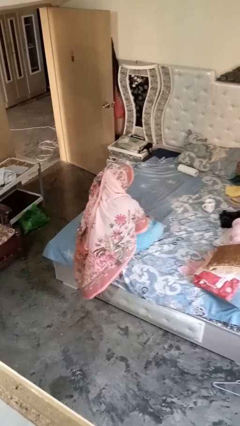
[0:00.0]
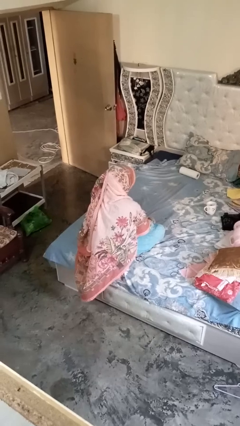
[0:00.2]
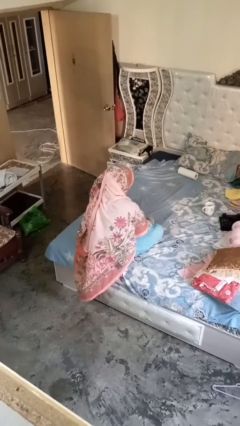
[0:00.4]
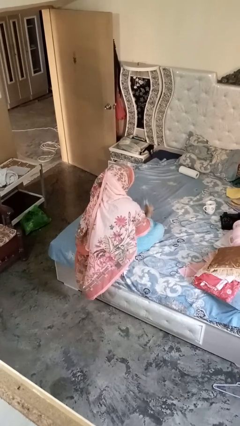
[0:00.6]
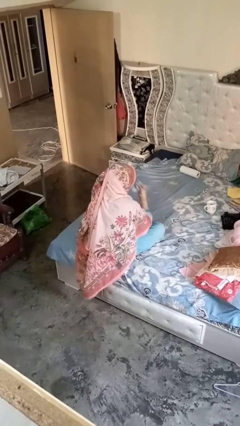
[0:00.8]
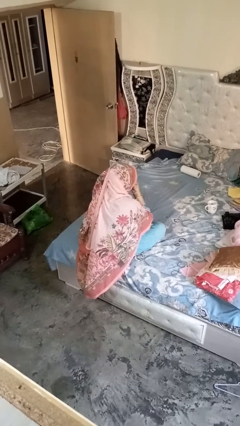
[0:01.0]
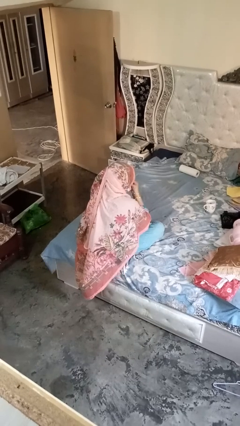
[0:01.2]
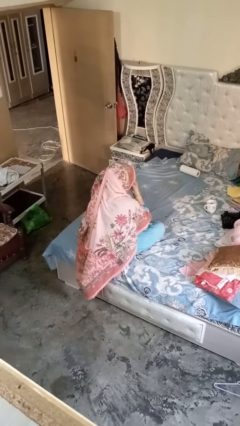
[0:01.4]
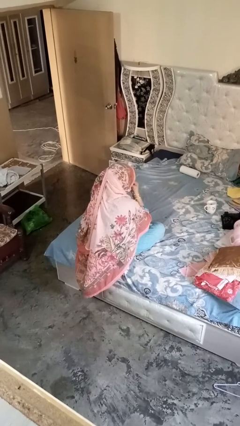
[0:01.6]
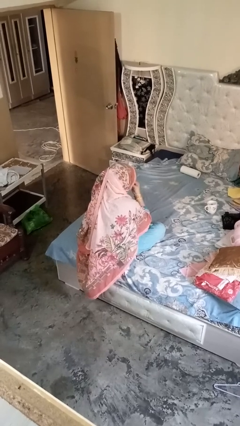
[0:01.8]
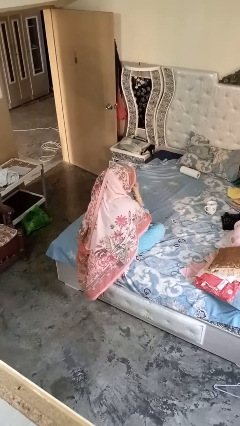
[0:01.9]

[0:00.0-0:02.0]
person blows nose

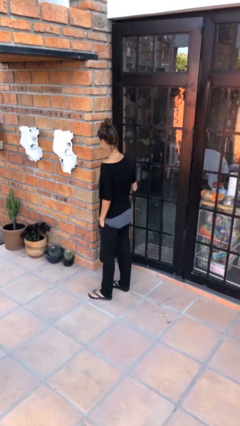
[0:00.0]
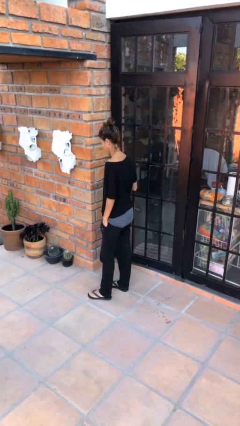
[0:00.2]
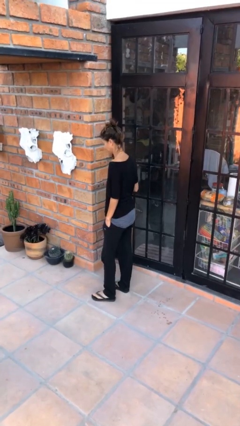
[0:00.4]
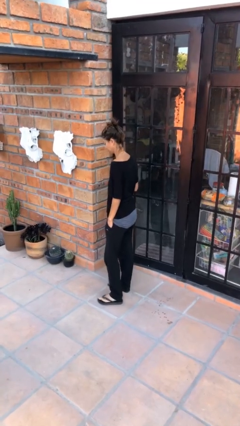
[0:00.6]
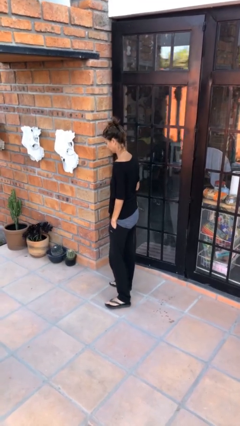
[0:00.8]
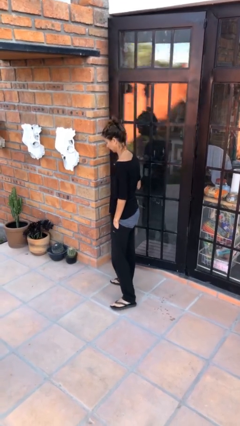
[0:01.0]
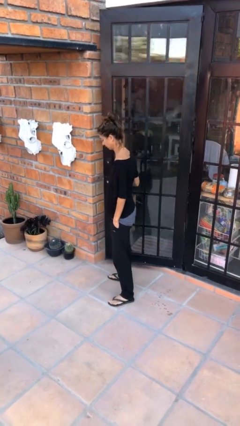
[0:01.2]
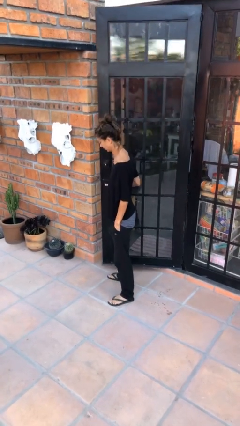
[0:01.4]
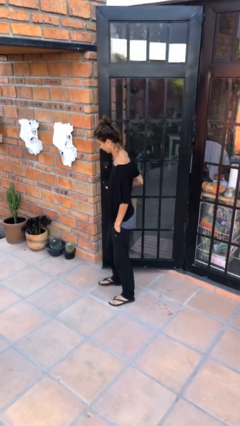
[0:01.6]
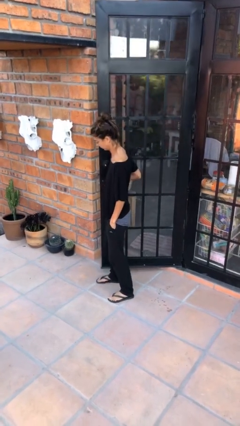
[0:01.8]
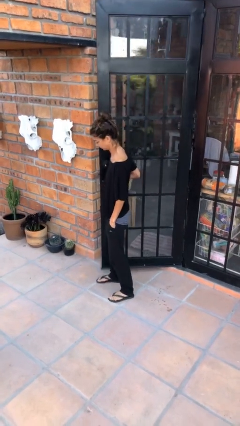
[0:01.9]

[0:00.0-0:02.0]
person opens facility door

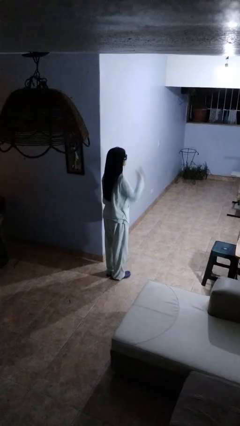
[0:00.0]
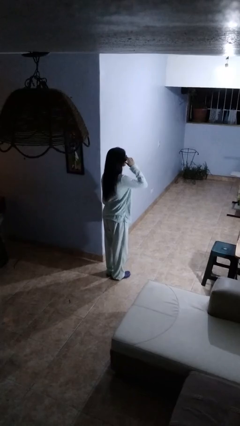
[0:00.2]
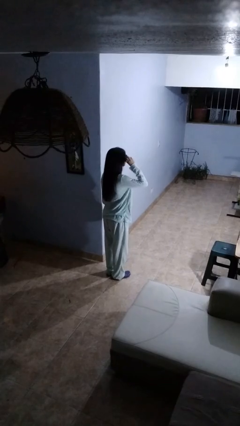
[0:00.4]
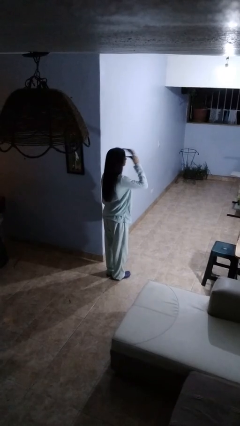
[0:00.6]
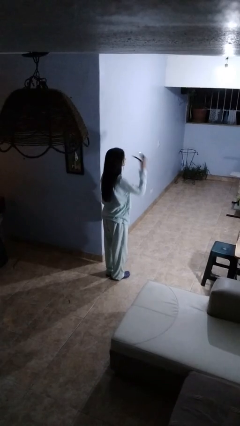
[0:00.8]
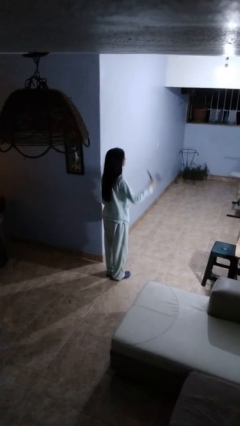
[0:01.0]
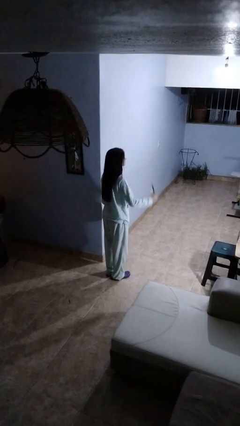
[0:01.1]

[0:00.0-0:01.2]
person takes off sunglasses

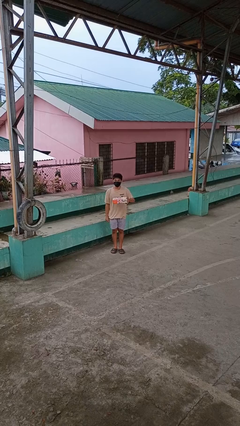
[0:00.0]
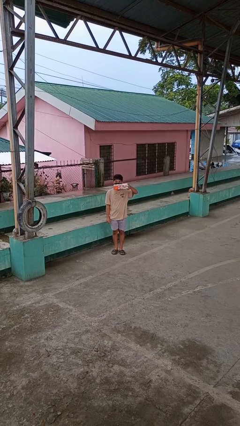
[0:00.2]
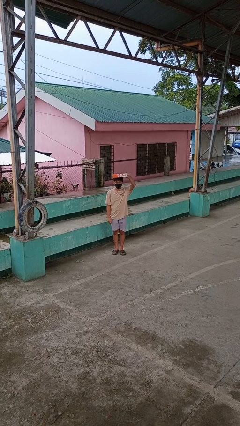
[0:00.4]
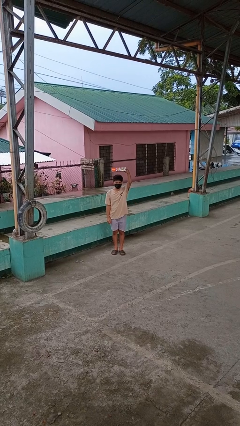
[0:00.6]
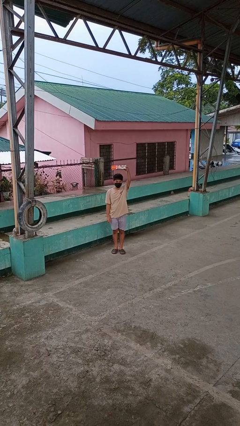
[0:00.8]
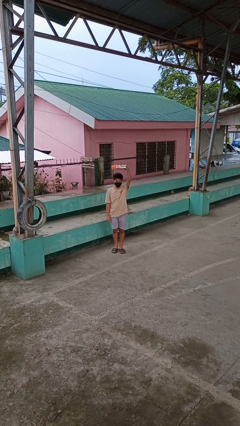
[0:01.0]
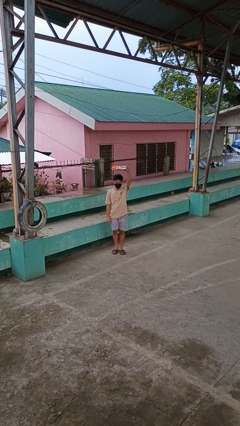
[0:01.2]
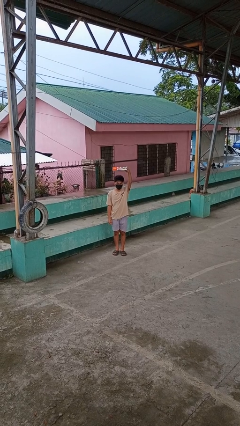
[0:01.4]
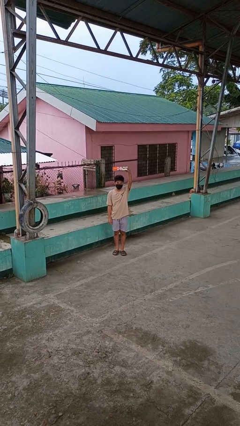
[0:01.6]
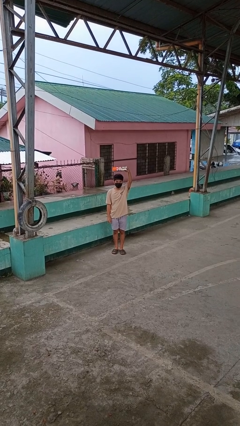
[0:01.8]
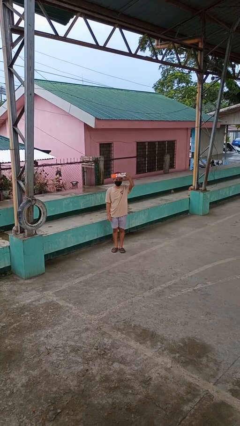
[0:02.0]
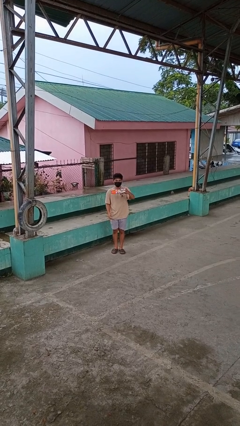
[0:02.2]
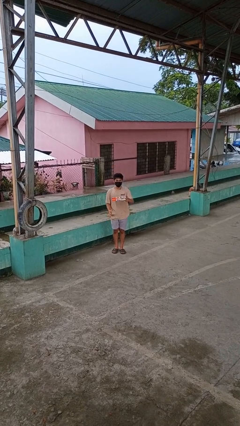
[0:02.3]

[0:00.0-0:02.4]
person holds object above head

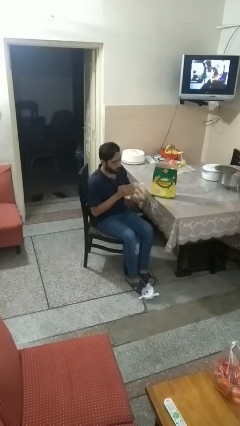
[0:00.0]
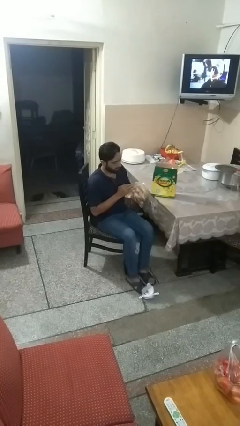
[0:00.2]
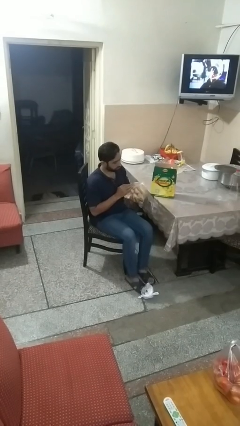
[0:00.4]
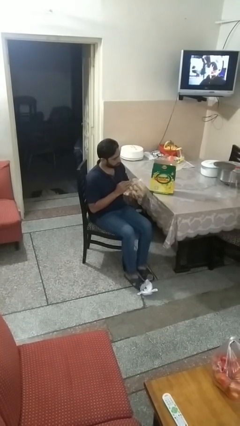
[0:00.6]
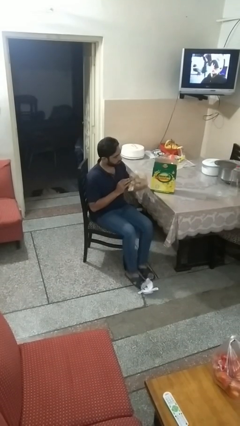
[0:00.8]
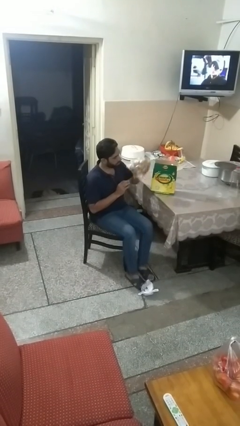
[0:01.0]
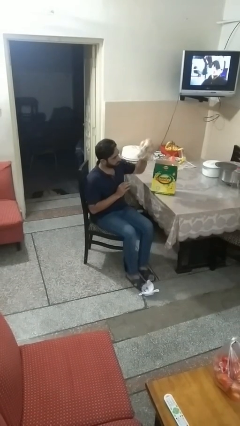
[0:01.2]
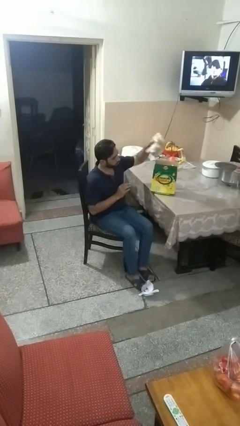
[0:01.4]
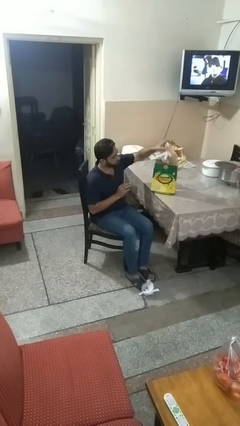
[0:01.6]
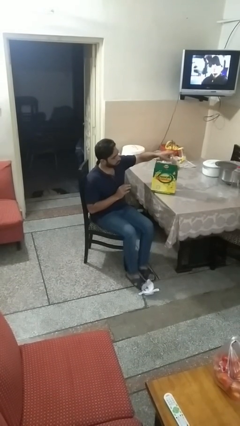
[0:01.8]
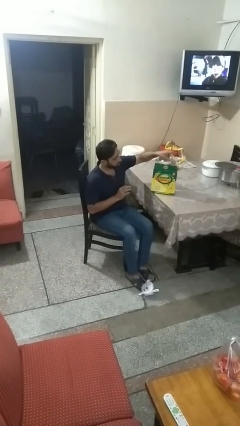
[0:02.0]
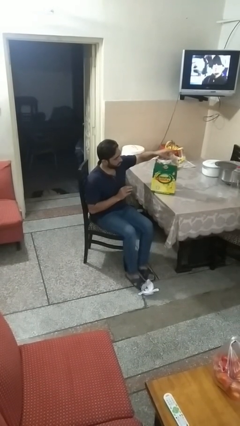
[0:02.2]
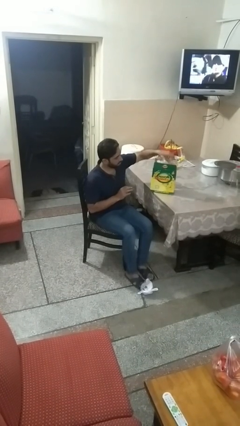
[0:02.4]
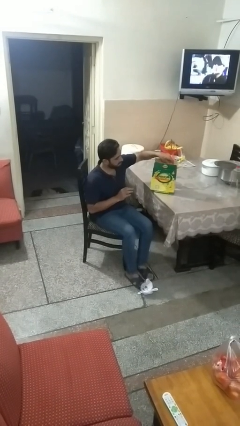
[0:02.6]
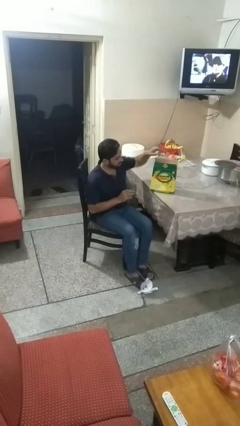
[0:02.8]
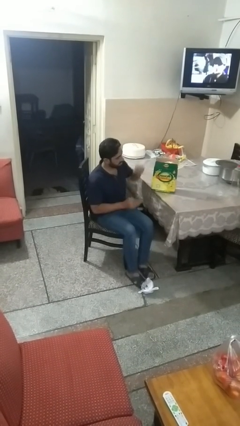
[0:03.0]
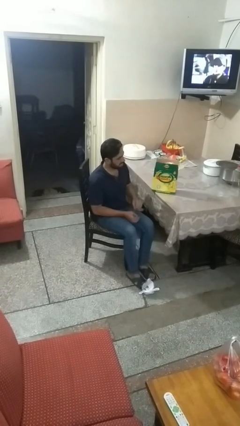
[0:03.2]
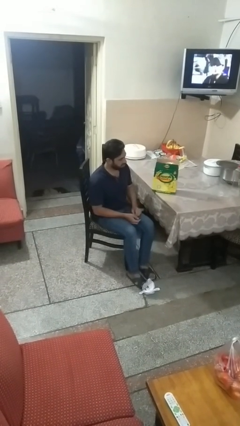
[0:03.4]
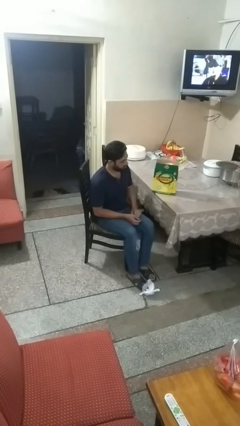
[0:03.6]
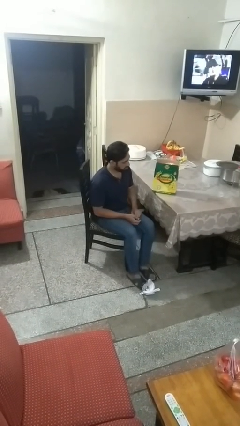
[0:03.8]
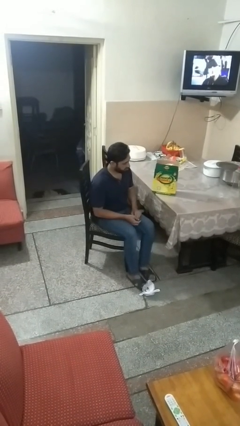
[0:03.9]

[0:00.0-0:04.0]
person puts object into box

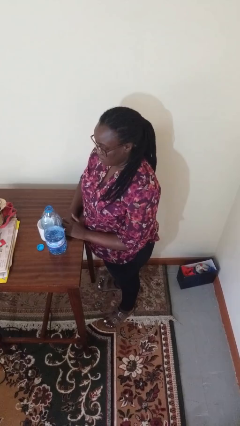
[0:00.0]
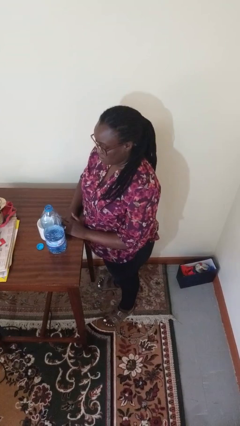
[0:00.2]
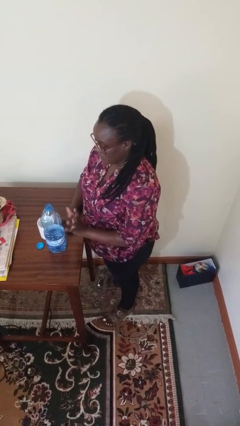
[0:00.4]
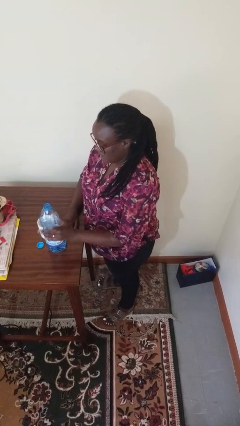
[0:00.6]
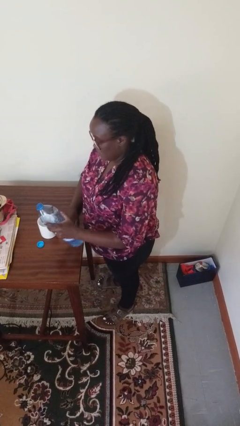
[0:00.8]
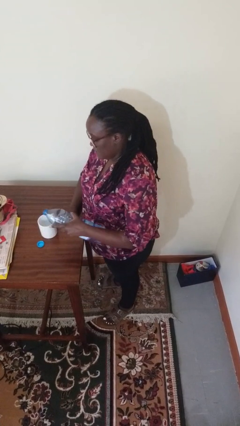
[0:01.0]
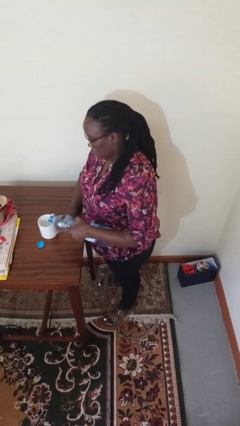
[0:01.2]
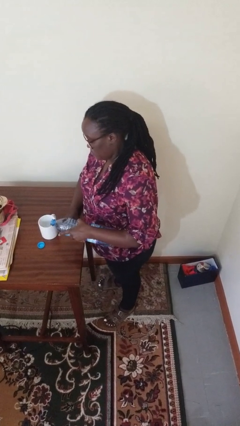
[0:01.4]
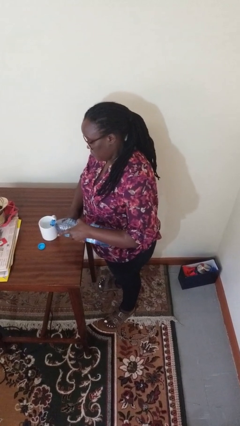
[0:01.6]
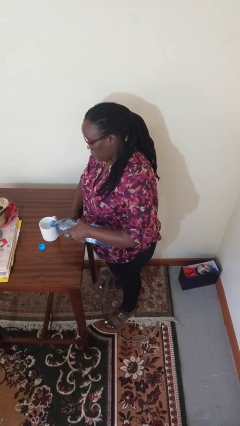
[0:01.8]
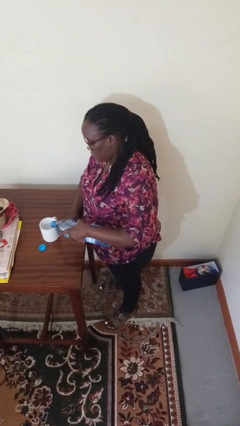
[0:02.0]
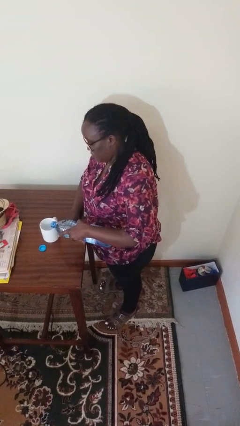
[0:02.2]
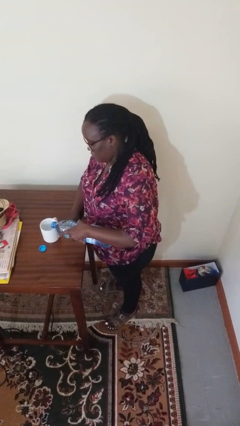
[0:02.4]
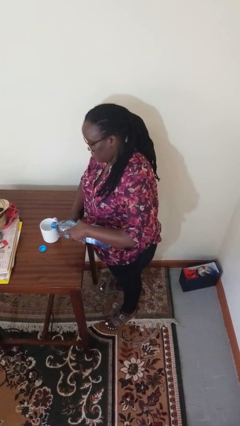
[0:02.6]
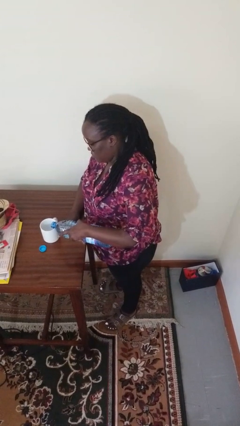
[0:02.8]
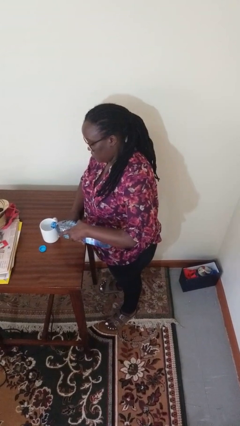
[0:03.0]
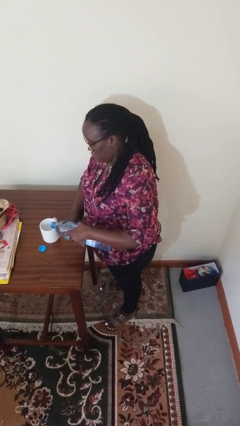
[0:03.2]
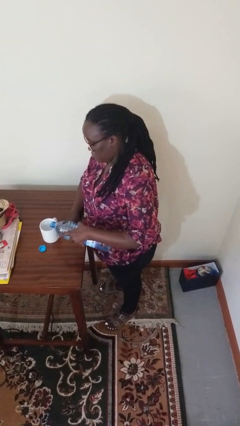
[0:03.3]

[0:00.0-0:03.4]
person pours liquid into cup

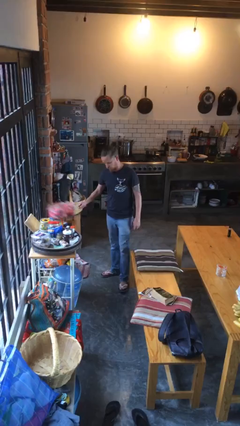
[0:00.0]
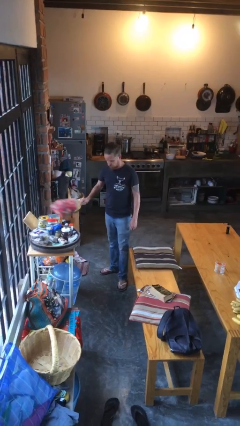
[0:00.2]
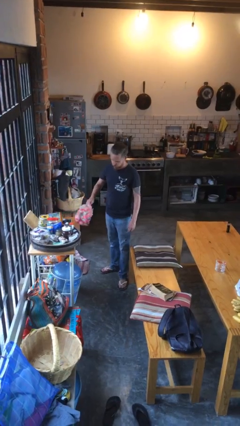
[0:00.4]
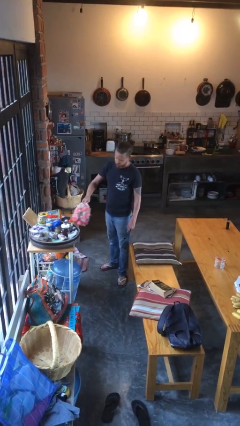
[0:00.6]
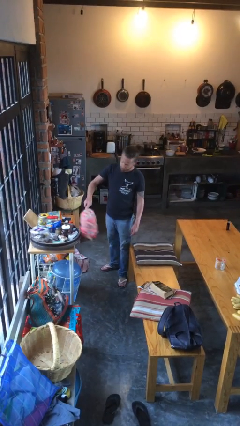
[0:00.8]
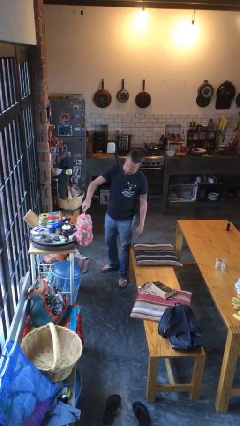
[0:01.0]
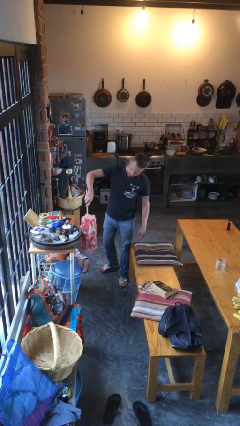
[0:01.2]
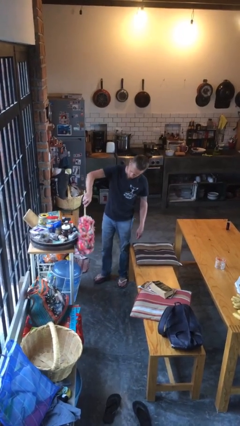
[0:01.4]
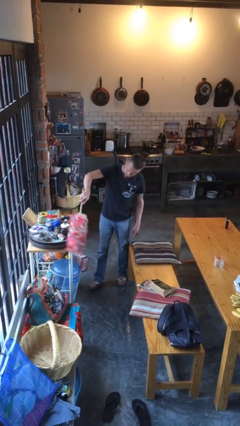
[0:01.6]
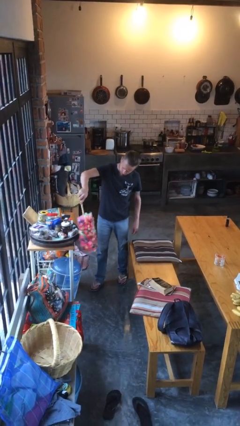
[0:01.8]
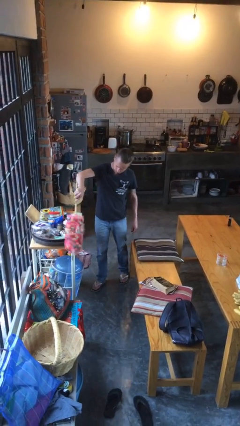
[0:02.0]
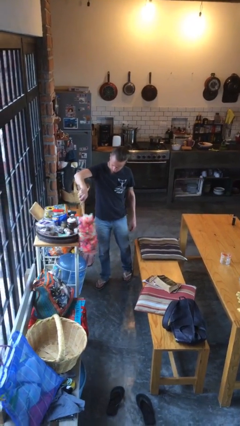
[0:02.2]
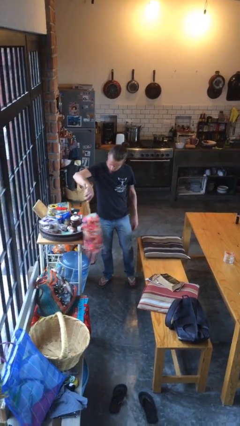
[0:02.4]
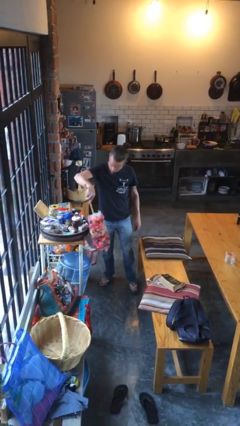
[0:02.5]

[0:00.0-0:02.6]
person dusts furniture
